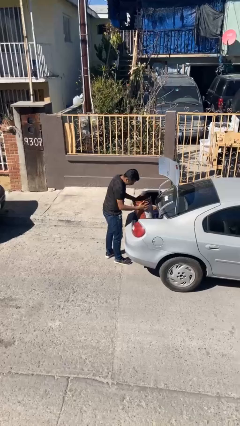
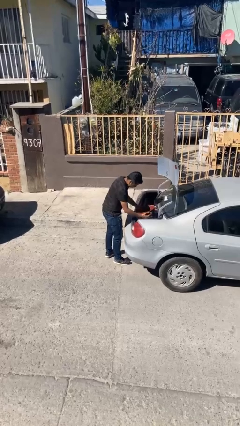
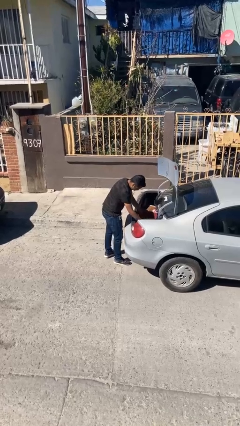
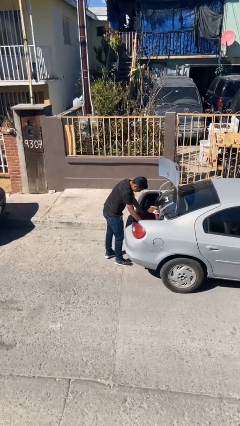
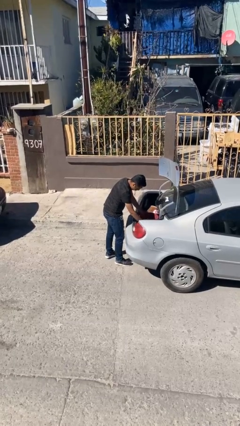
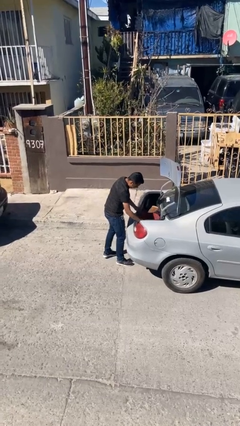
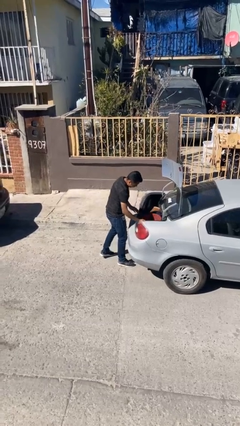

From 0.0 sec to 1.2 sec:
person loads car

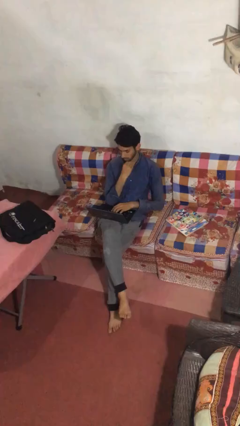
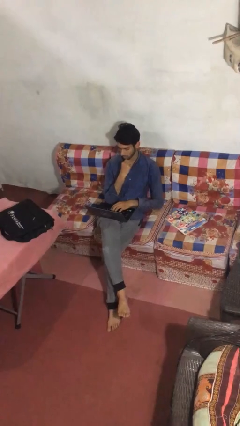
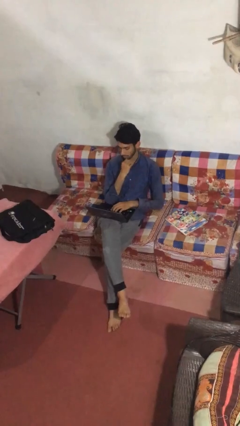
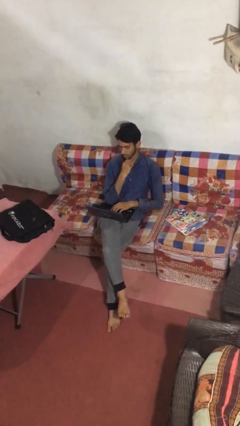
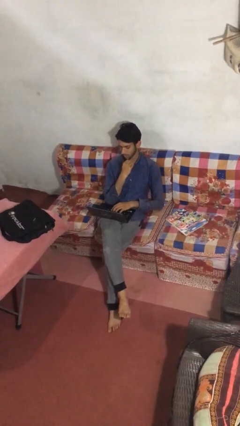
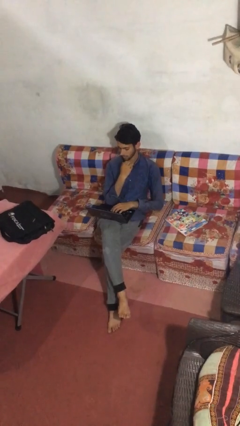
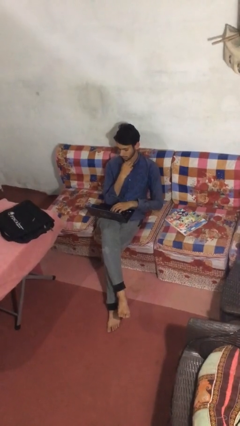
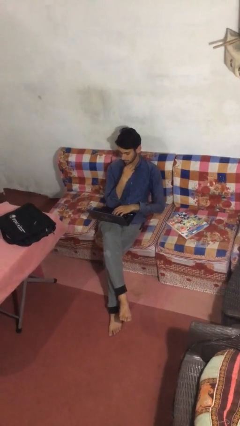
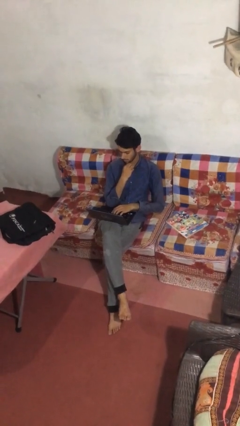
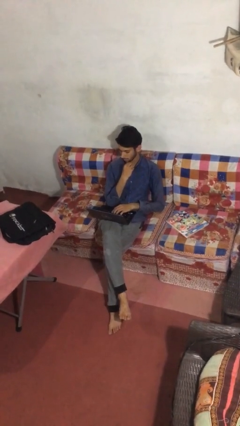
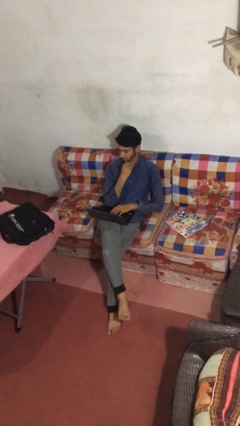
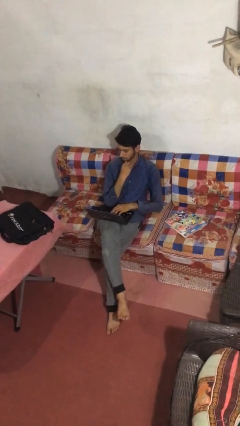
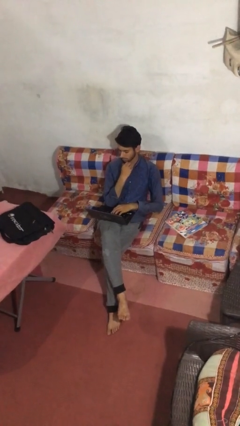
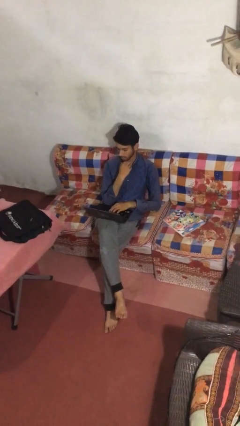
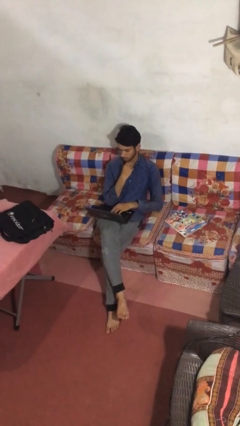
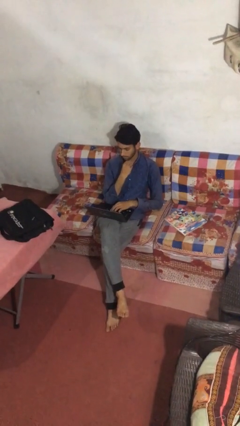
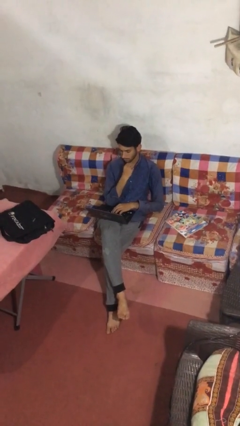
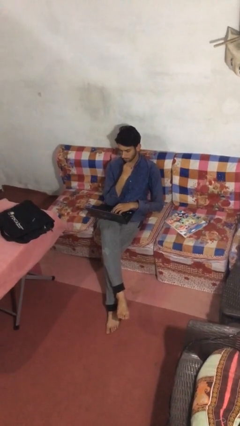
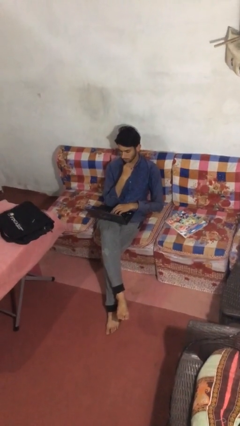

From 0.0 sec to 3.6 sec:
person interacts with laptop

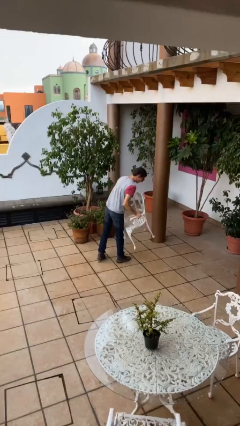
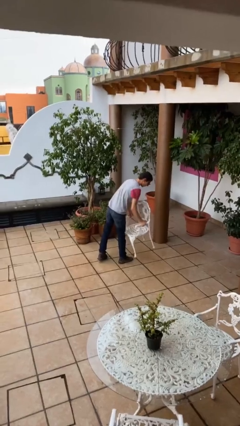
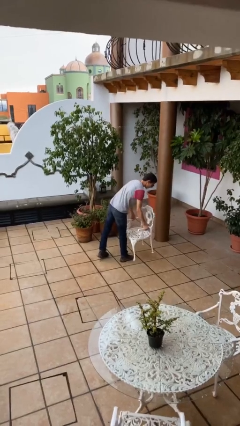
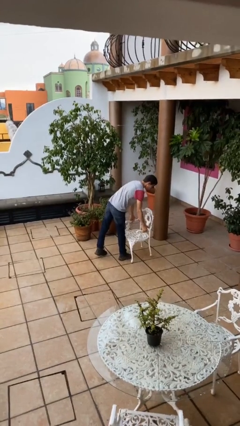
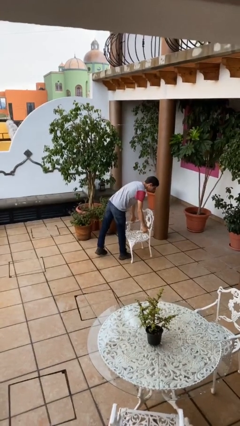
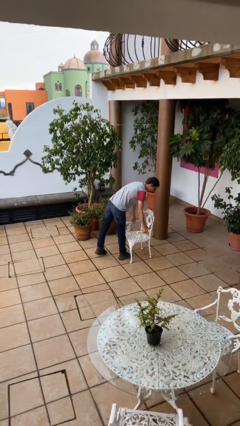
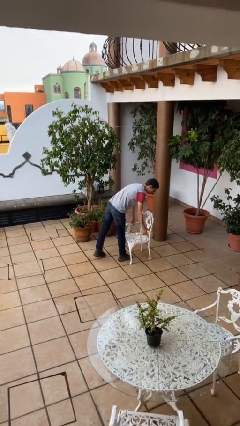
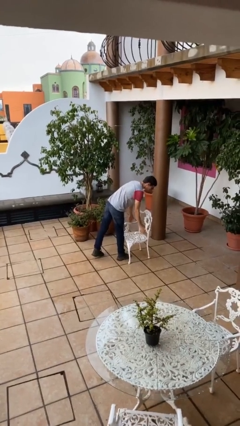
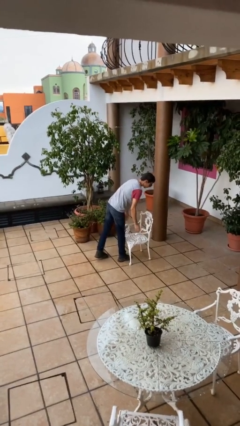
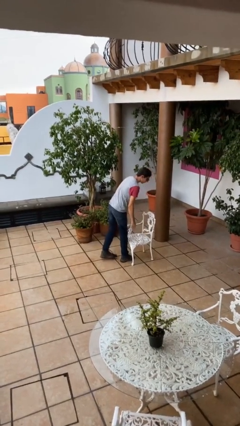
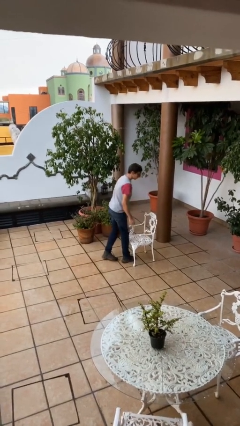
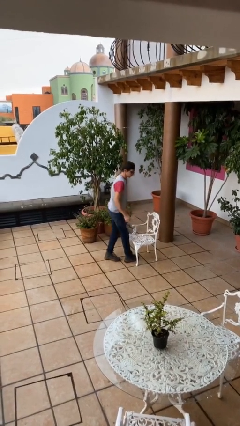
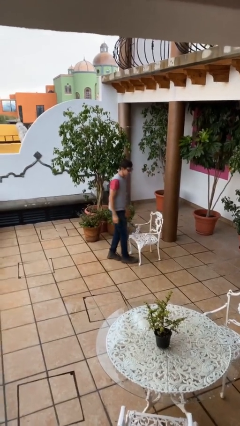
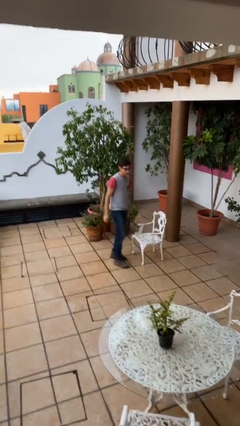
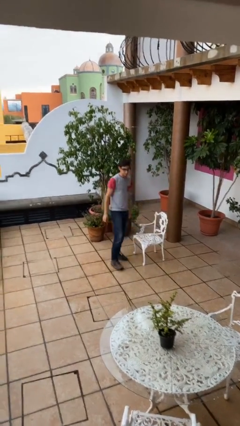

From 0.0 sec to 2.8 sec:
person puts down object on floor

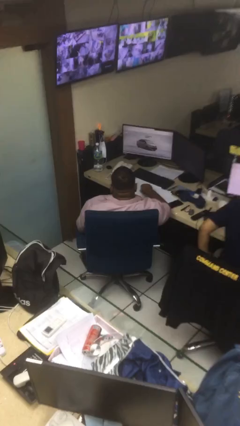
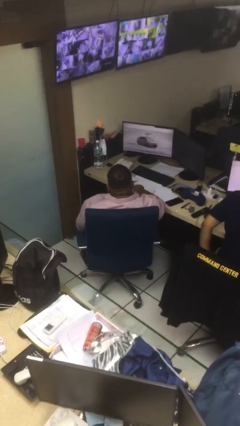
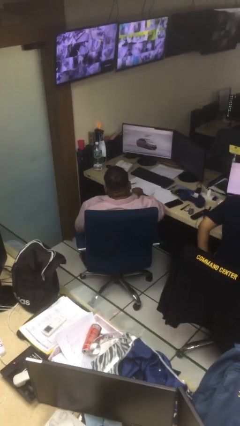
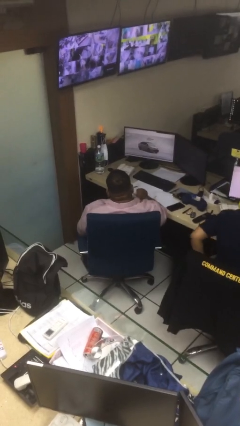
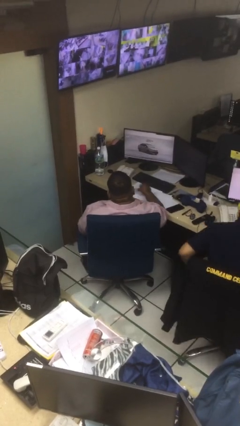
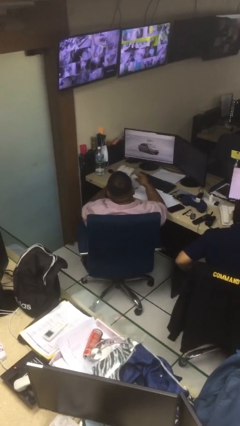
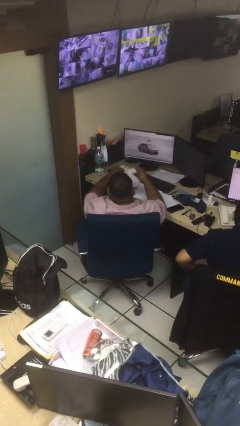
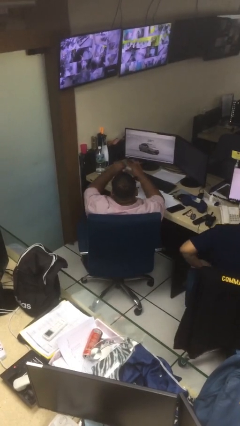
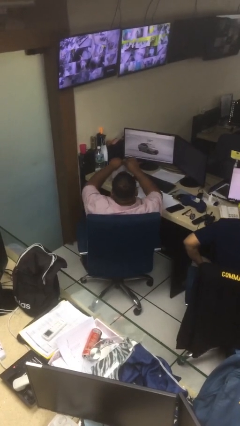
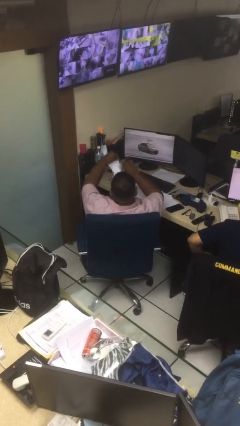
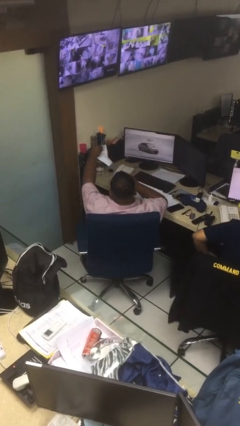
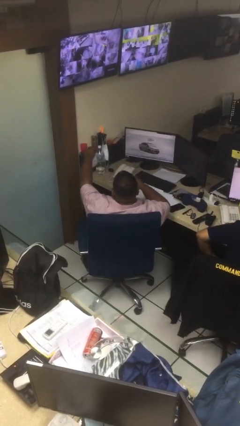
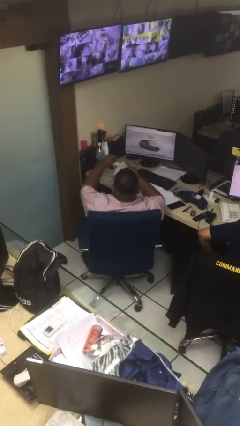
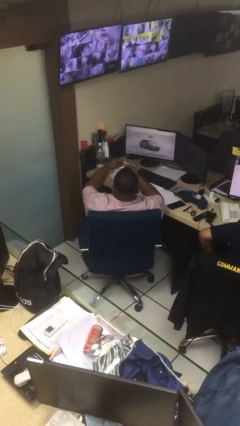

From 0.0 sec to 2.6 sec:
person tears paper

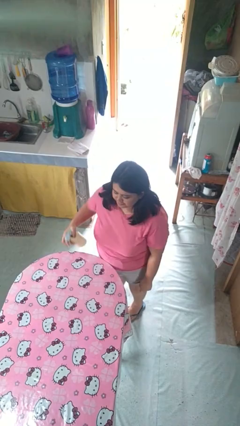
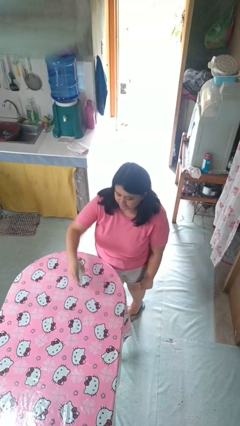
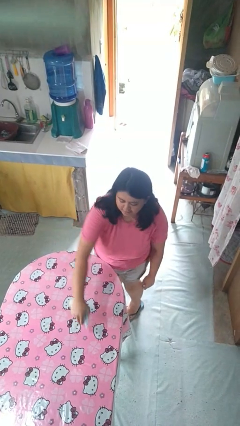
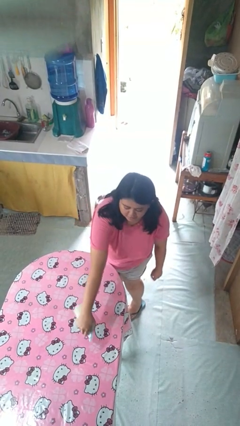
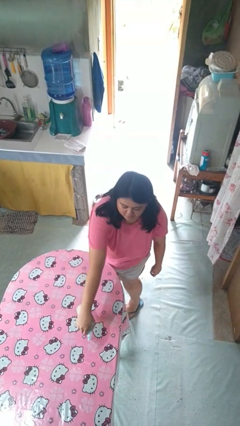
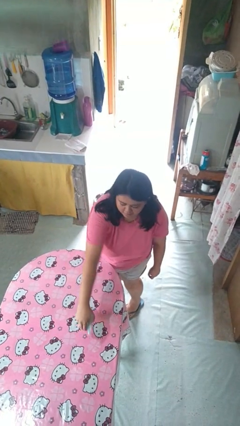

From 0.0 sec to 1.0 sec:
person sprays from bottle

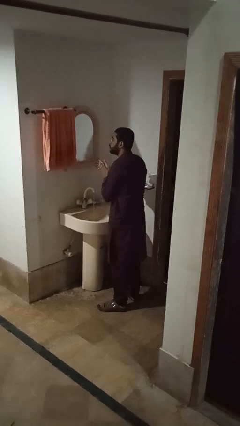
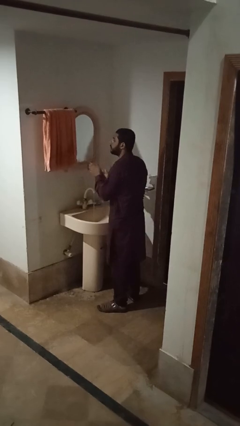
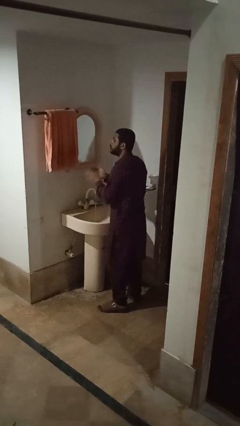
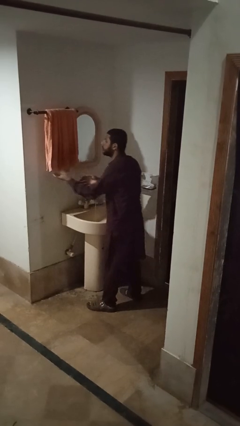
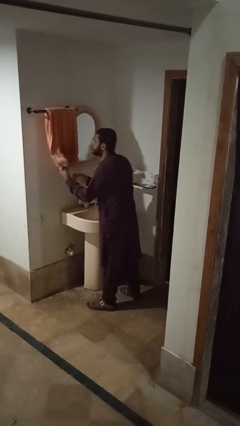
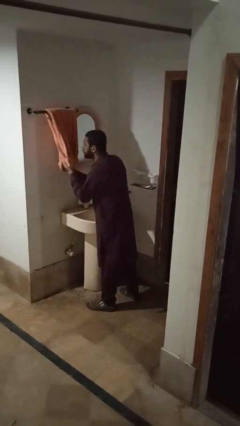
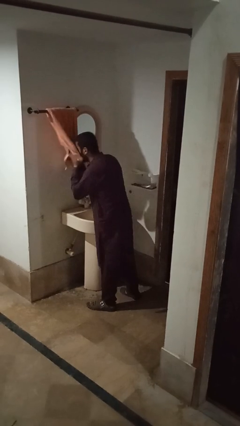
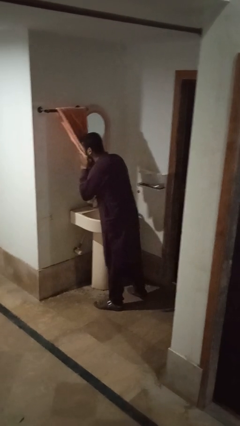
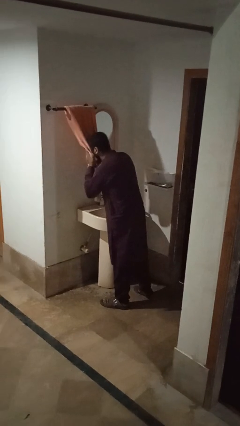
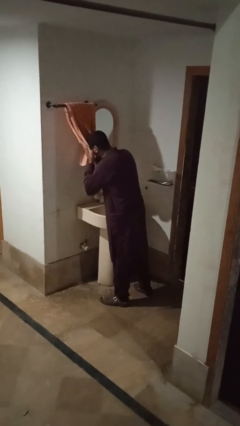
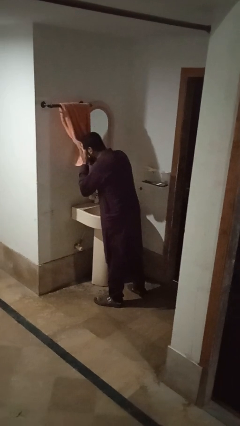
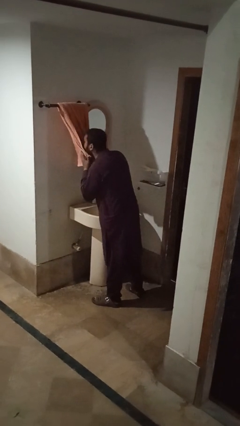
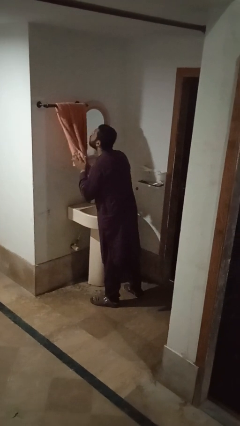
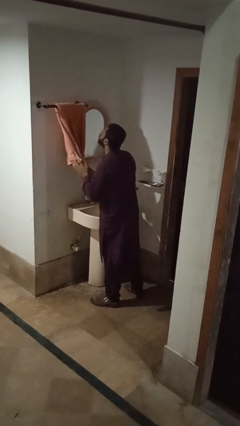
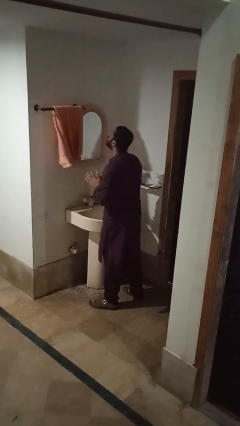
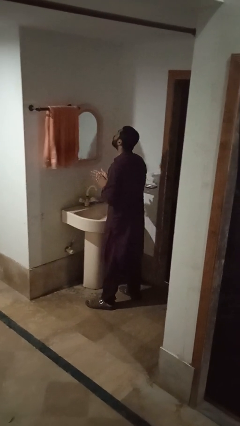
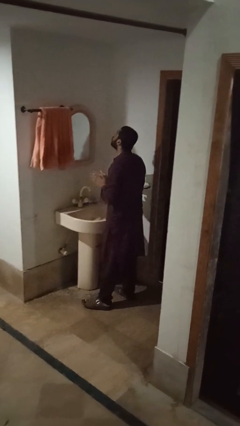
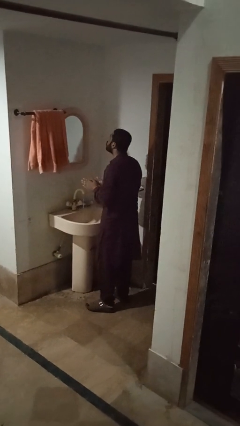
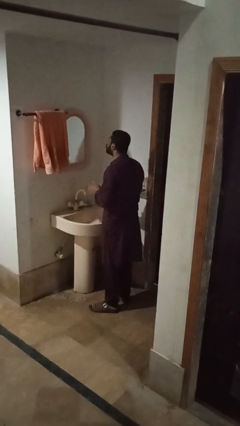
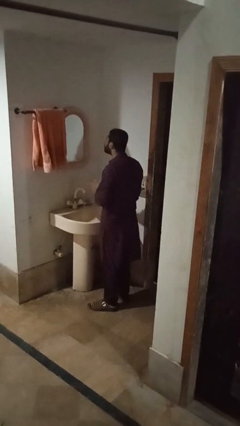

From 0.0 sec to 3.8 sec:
person dries face with towel

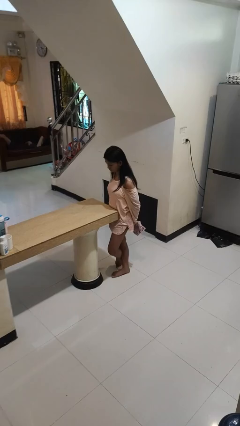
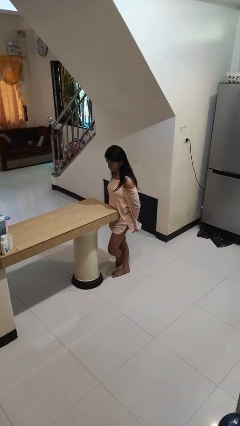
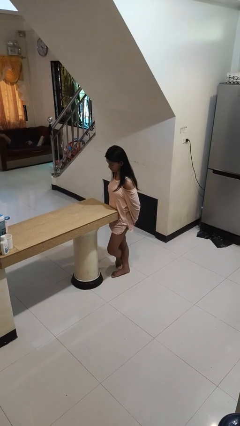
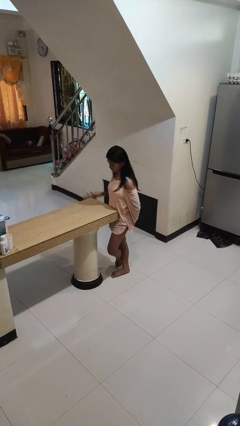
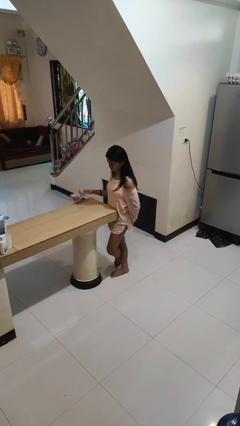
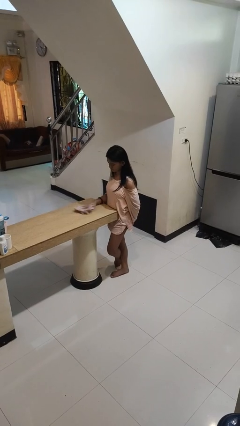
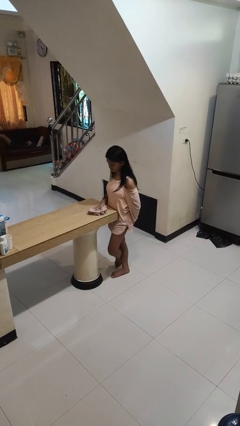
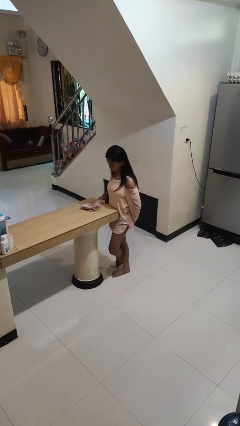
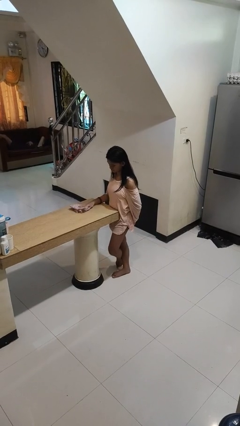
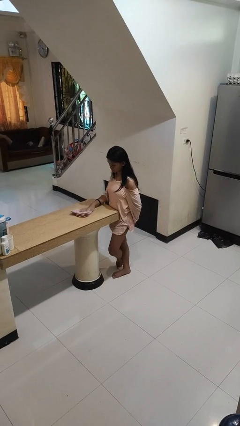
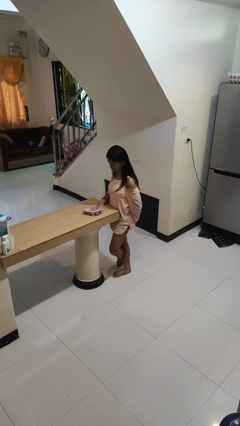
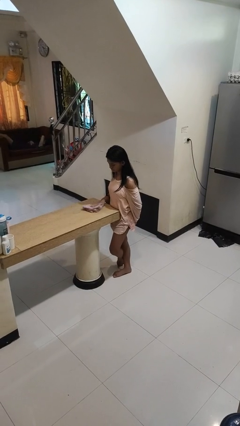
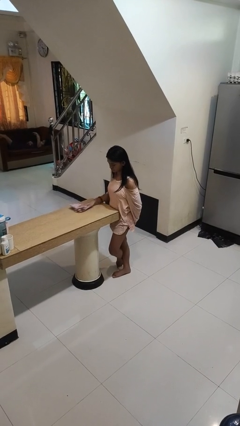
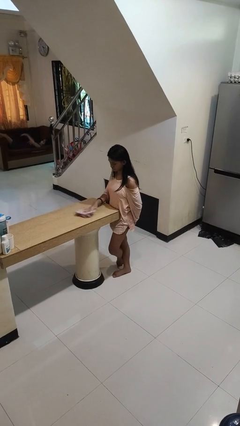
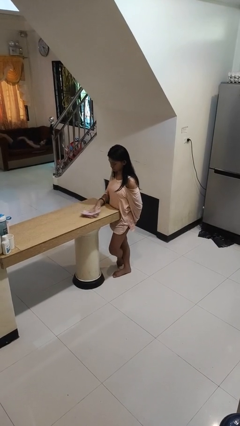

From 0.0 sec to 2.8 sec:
person cleans table with rag
